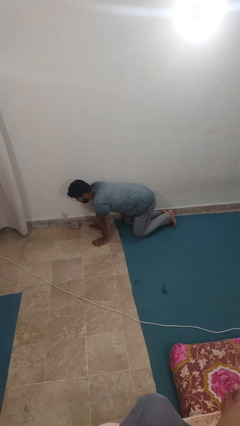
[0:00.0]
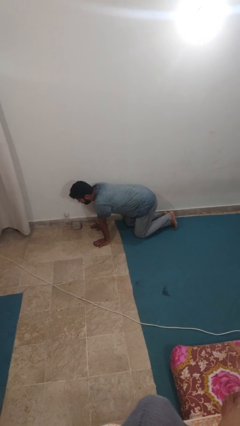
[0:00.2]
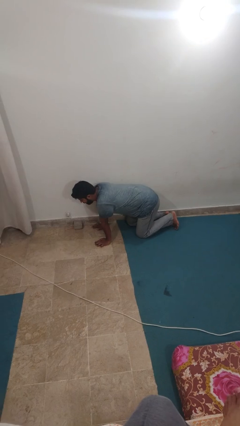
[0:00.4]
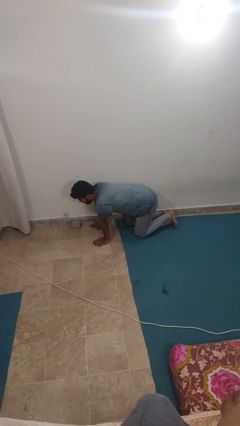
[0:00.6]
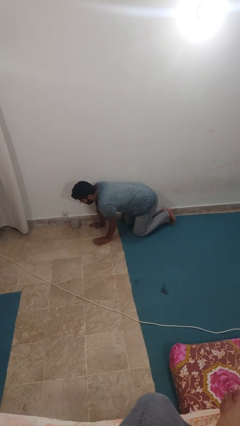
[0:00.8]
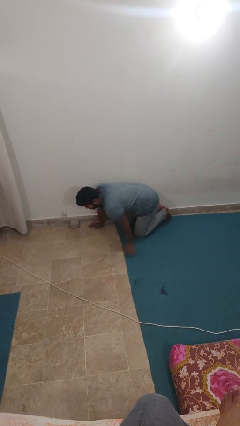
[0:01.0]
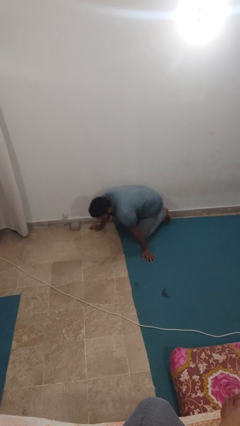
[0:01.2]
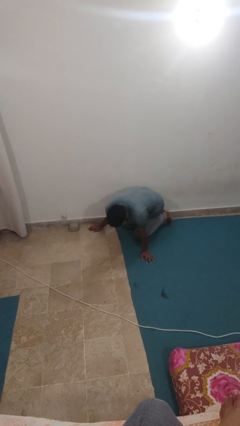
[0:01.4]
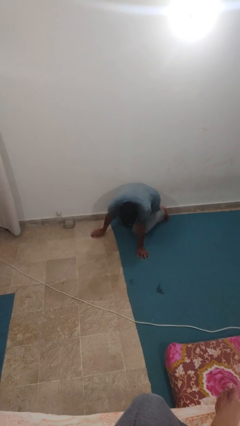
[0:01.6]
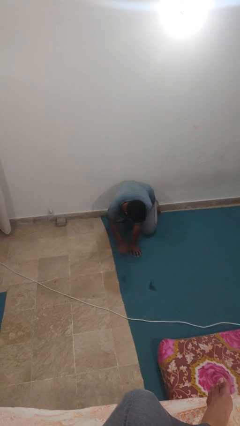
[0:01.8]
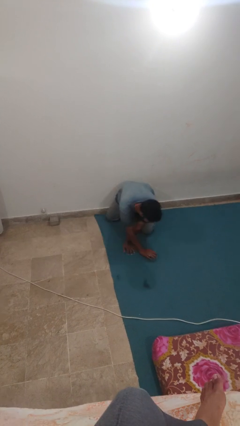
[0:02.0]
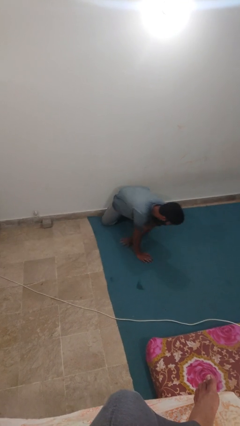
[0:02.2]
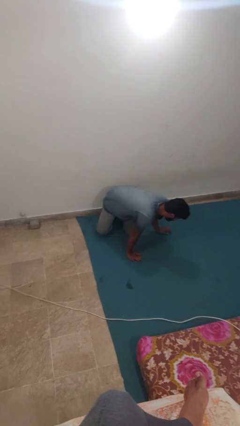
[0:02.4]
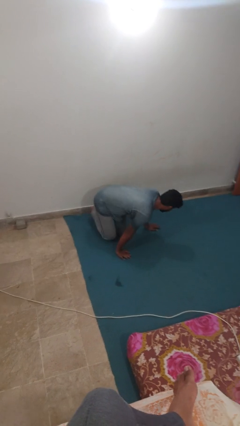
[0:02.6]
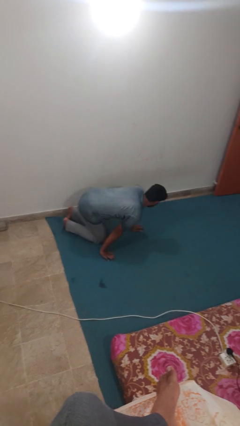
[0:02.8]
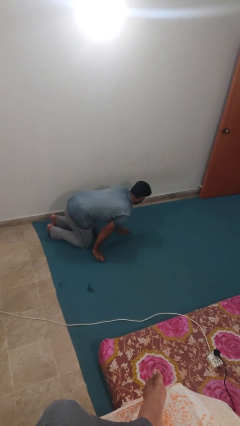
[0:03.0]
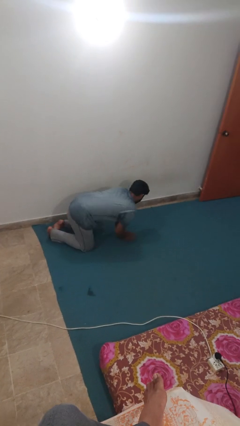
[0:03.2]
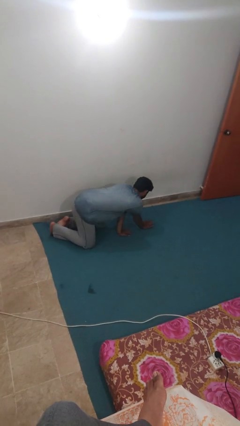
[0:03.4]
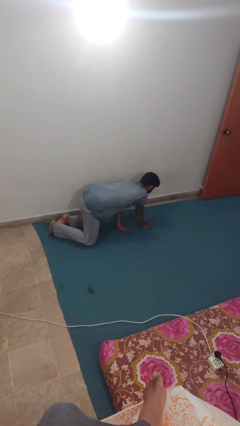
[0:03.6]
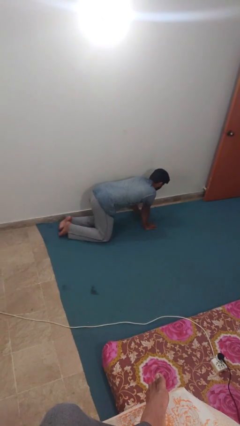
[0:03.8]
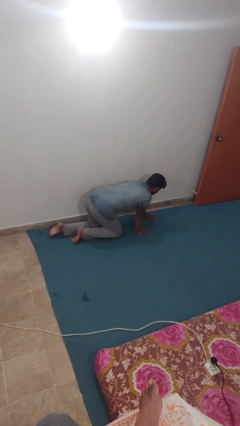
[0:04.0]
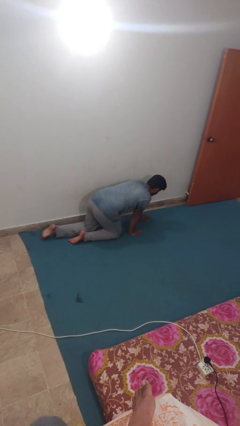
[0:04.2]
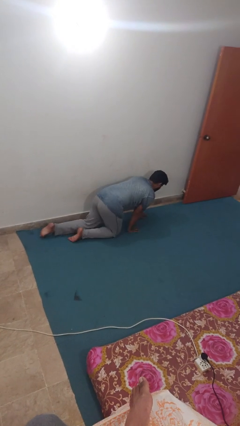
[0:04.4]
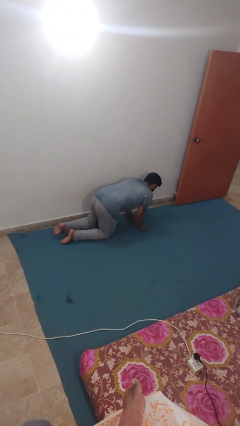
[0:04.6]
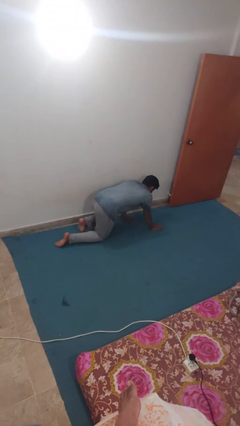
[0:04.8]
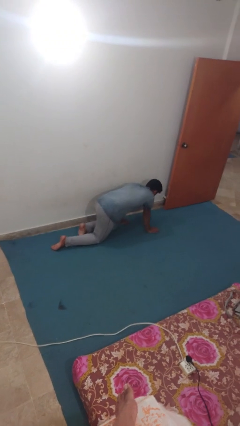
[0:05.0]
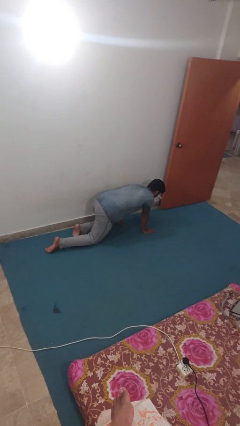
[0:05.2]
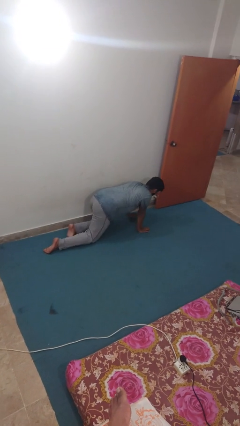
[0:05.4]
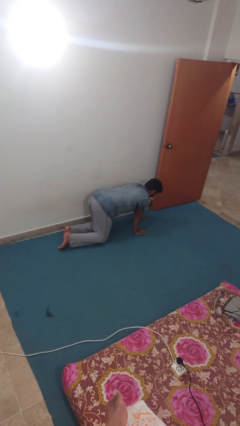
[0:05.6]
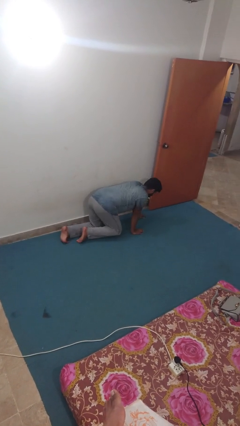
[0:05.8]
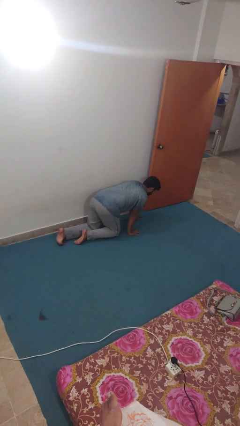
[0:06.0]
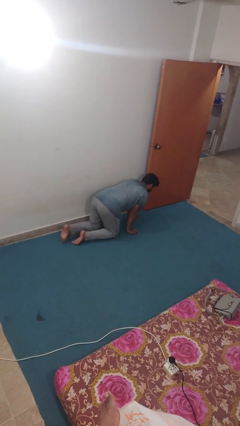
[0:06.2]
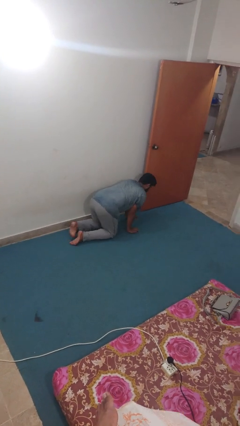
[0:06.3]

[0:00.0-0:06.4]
person crawls

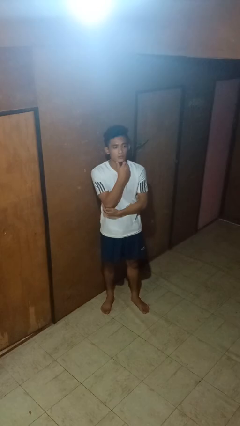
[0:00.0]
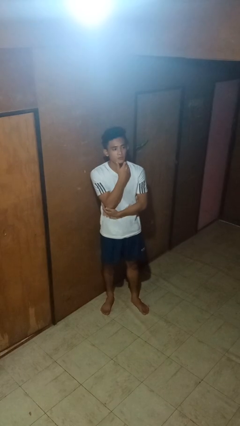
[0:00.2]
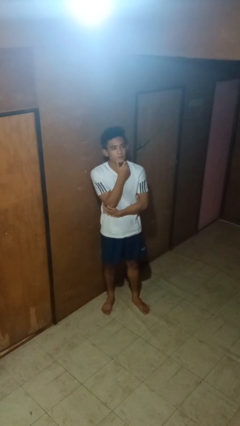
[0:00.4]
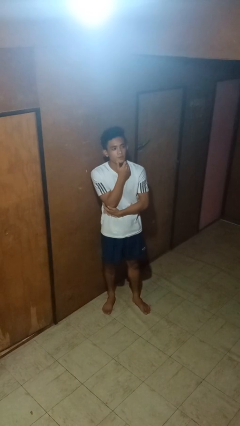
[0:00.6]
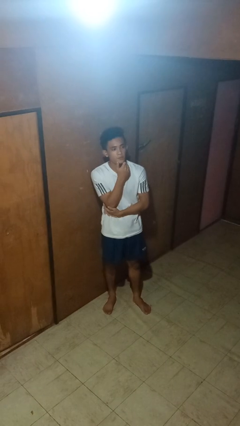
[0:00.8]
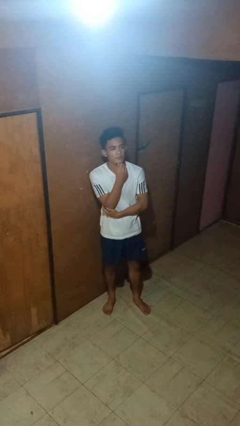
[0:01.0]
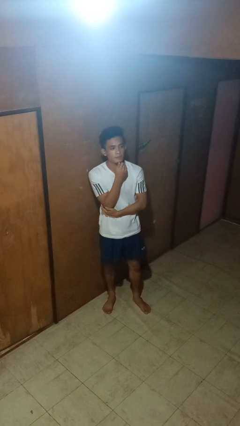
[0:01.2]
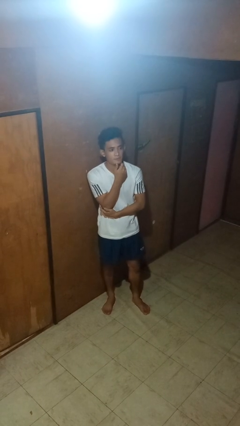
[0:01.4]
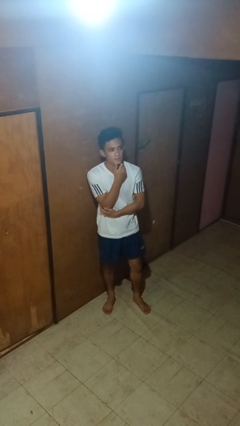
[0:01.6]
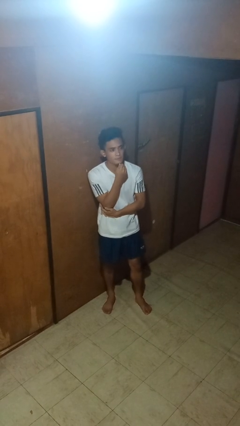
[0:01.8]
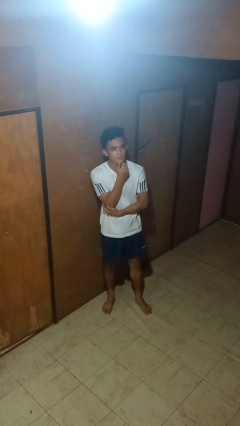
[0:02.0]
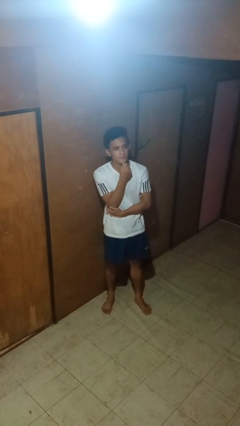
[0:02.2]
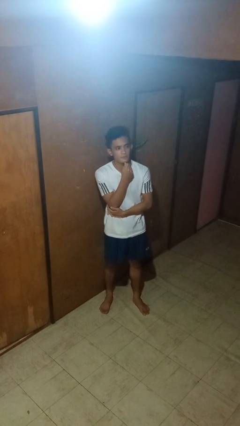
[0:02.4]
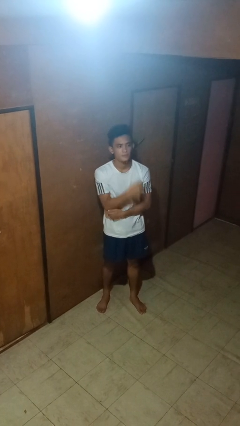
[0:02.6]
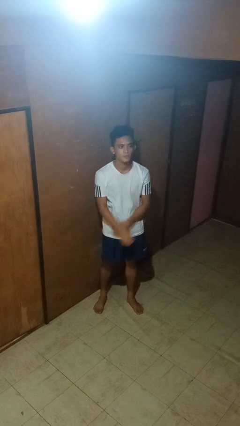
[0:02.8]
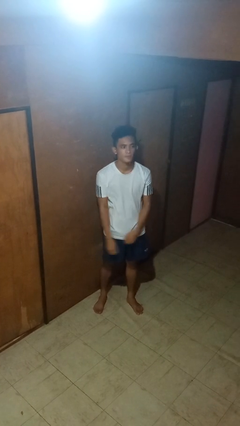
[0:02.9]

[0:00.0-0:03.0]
person strokes chin

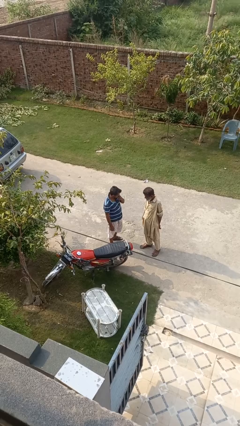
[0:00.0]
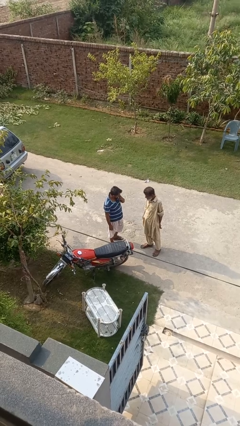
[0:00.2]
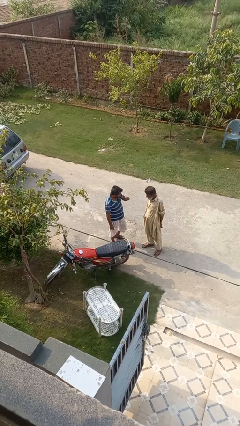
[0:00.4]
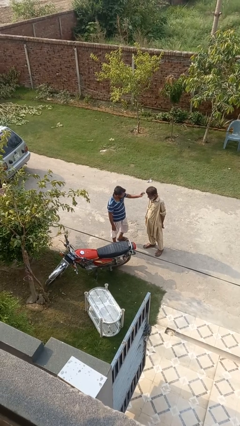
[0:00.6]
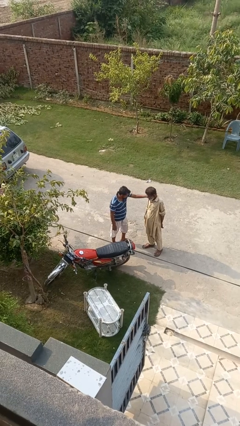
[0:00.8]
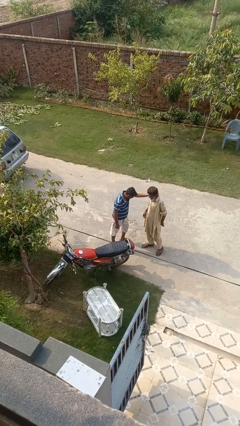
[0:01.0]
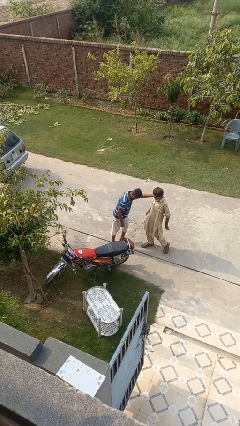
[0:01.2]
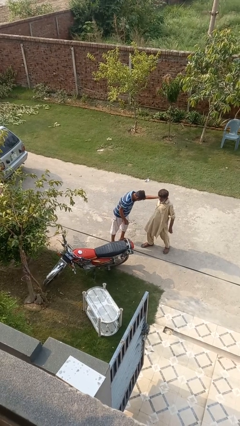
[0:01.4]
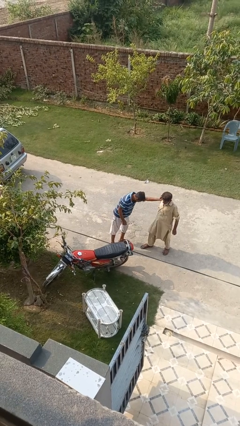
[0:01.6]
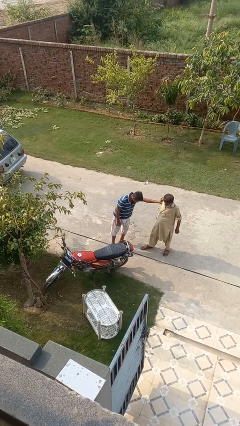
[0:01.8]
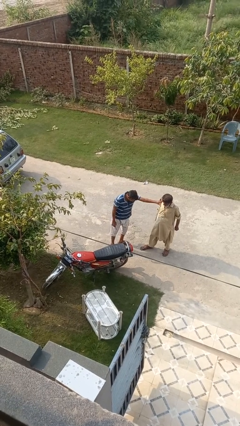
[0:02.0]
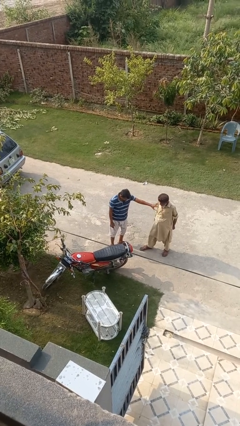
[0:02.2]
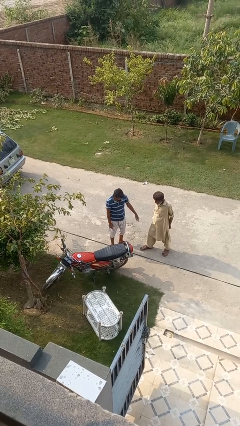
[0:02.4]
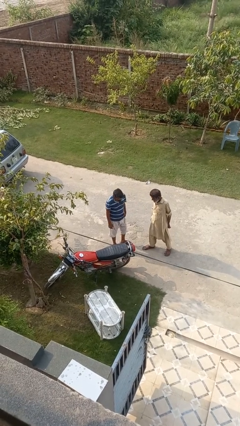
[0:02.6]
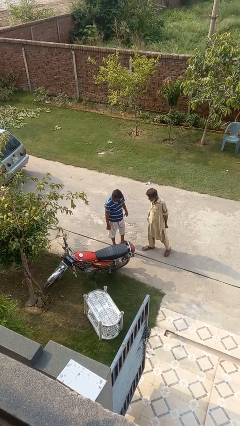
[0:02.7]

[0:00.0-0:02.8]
person shoves person

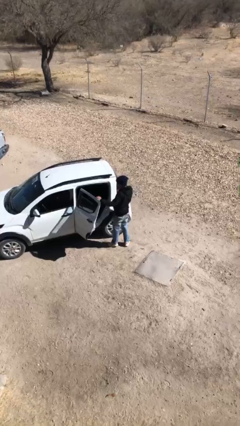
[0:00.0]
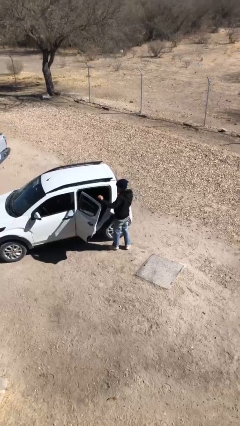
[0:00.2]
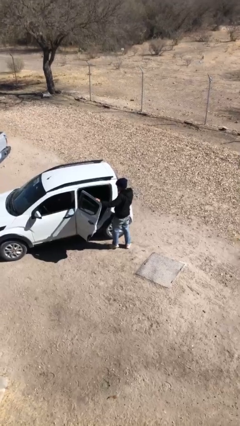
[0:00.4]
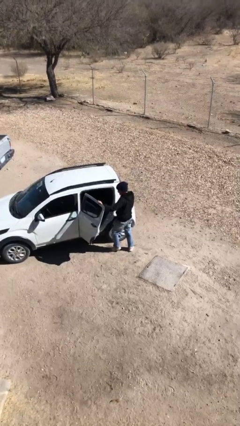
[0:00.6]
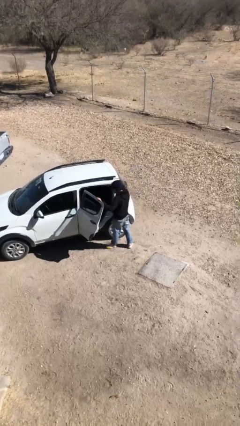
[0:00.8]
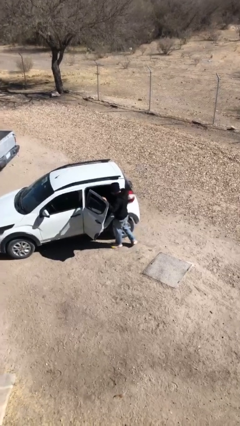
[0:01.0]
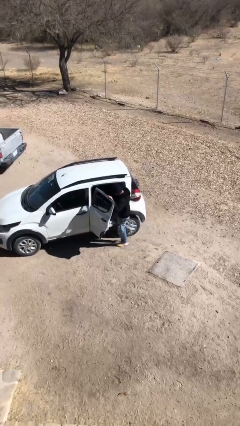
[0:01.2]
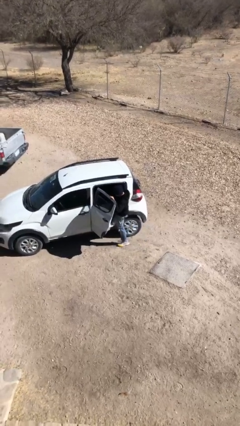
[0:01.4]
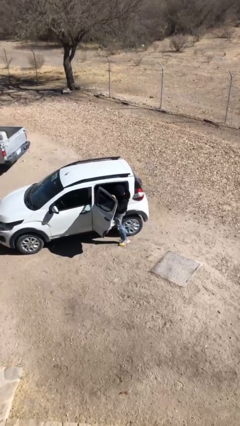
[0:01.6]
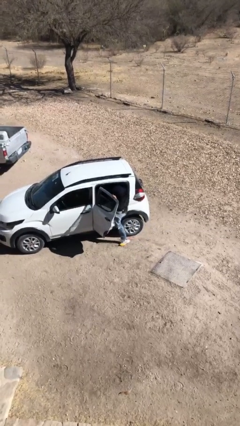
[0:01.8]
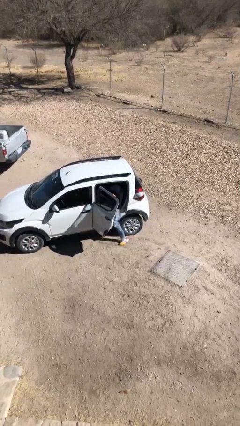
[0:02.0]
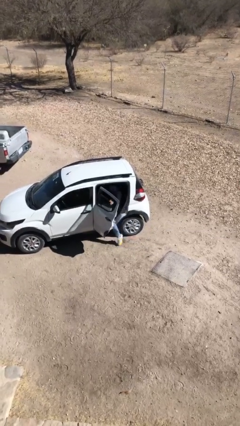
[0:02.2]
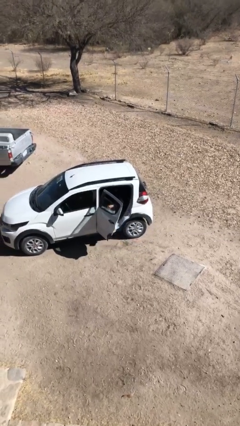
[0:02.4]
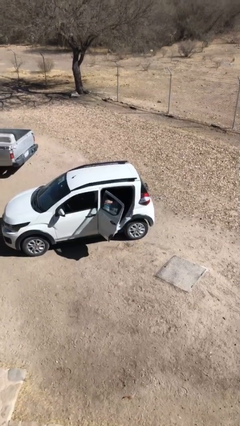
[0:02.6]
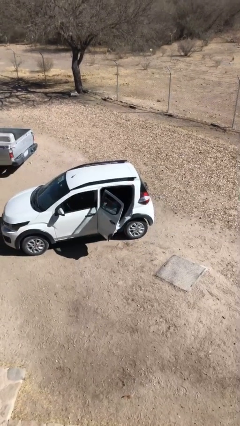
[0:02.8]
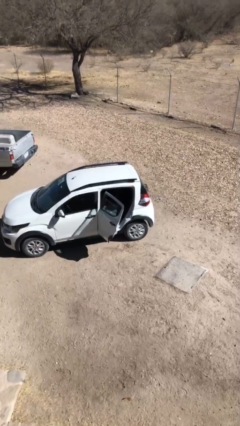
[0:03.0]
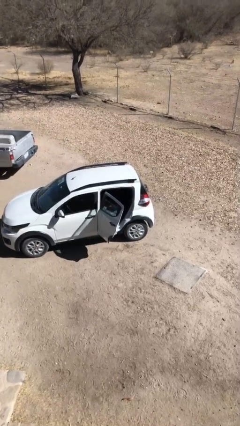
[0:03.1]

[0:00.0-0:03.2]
person enters car

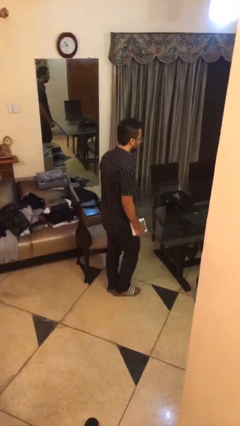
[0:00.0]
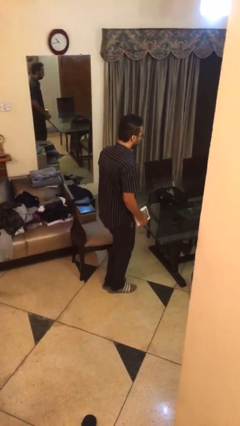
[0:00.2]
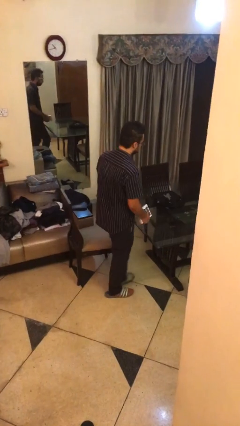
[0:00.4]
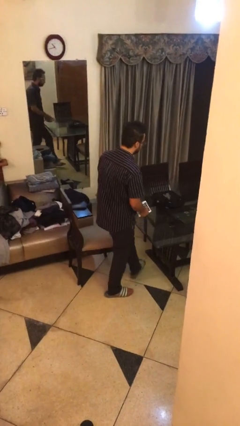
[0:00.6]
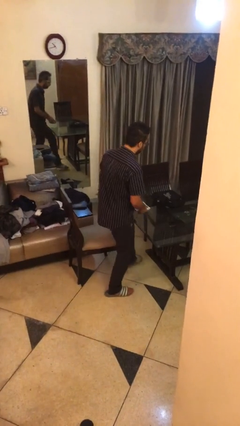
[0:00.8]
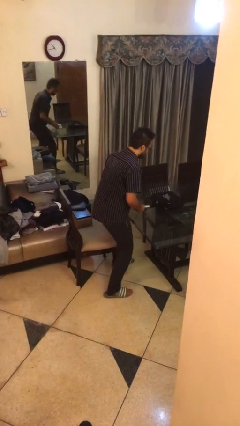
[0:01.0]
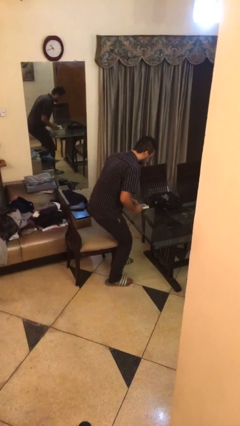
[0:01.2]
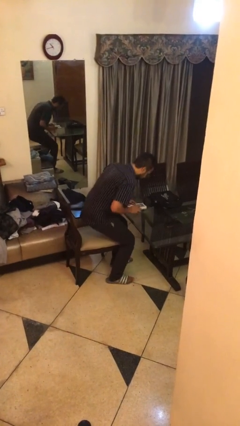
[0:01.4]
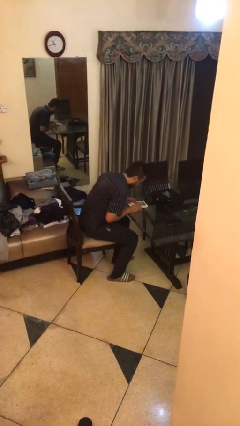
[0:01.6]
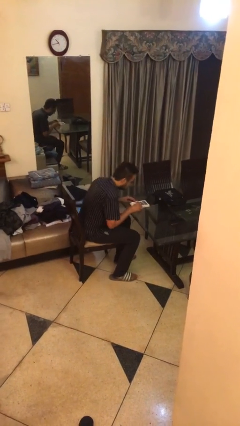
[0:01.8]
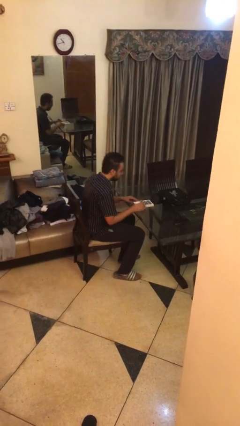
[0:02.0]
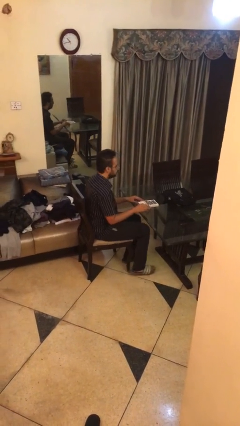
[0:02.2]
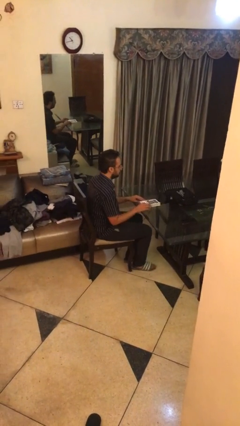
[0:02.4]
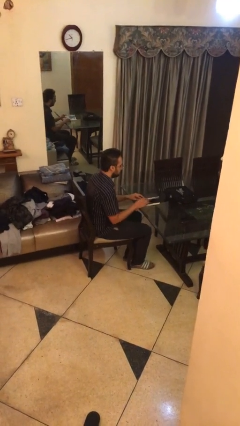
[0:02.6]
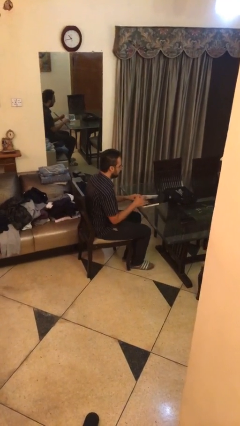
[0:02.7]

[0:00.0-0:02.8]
person sits down
